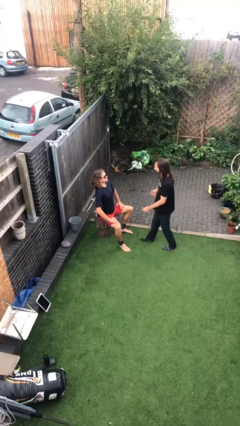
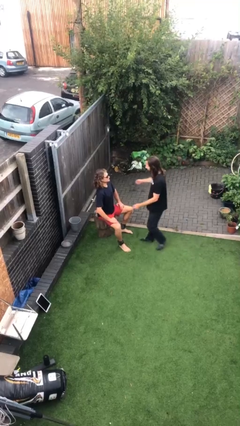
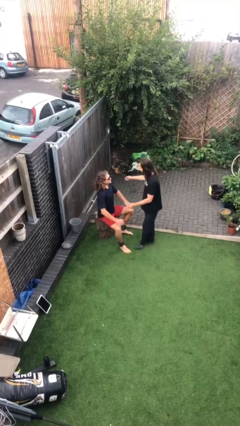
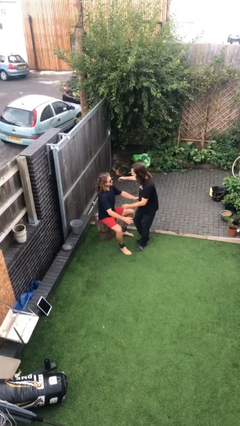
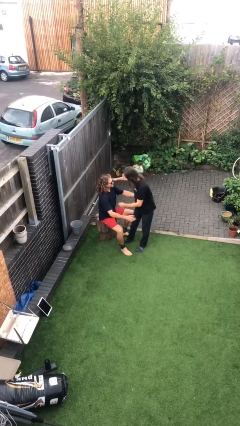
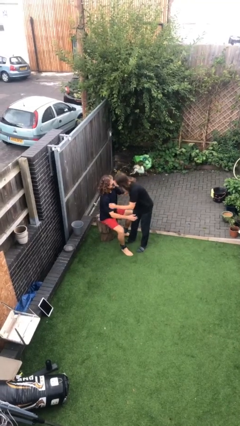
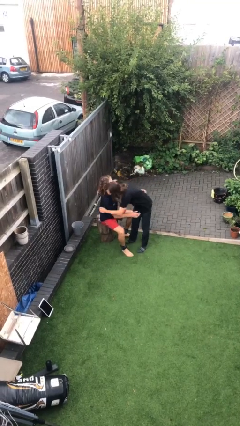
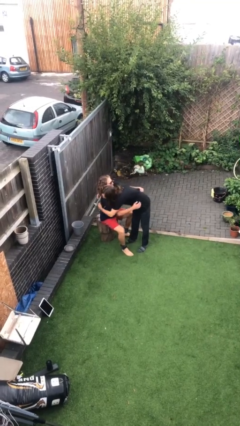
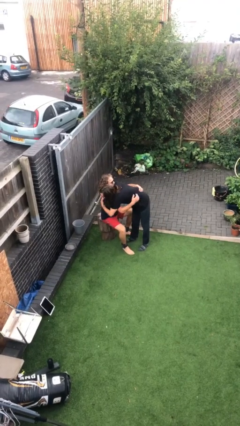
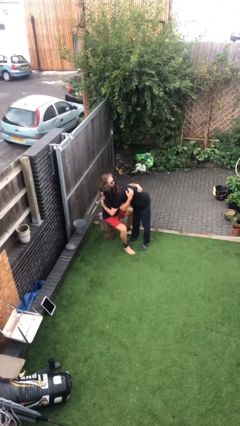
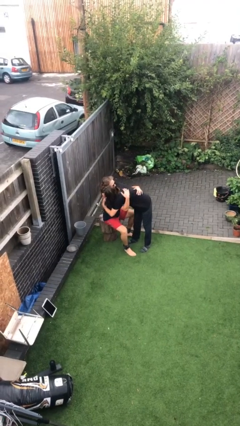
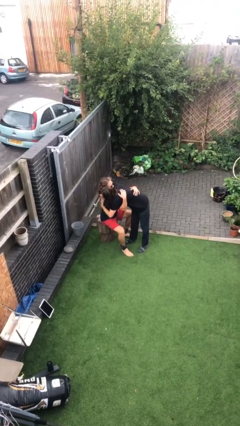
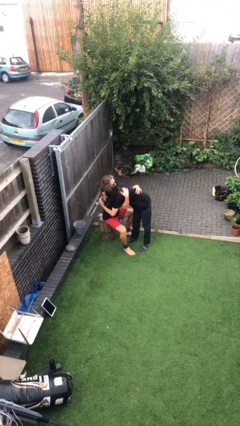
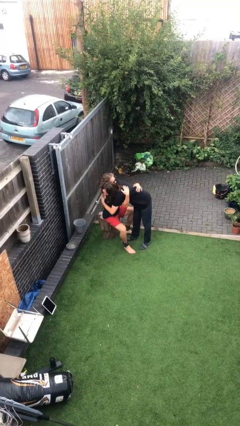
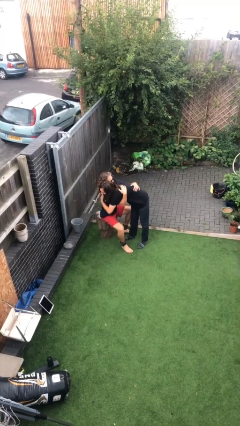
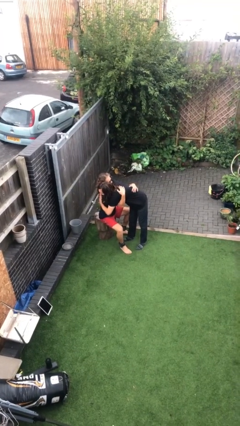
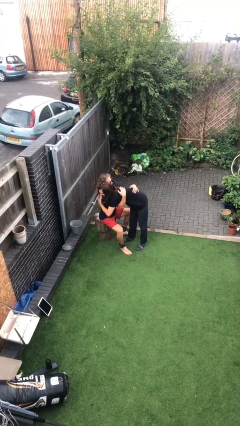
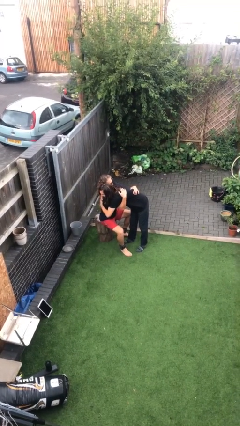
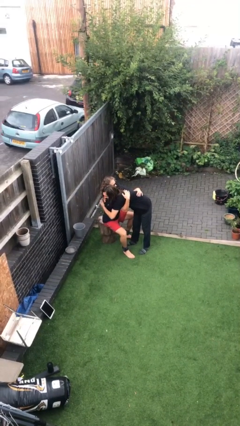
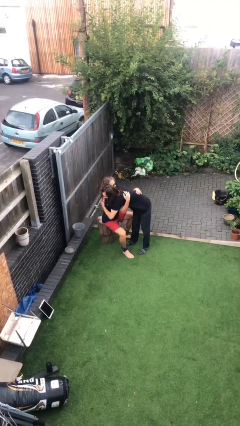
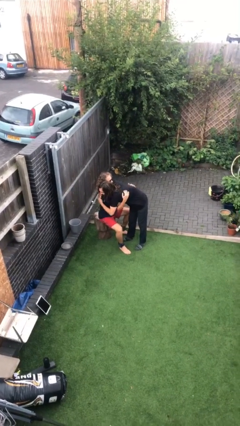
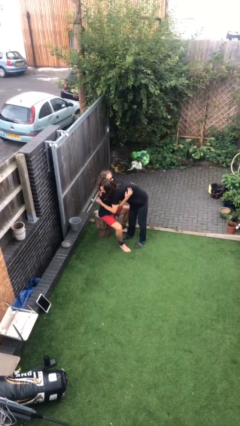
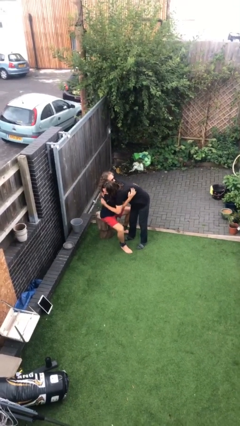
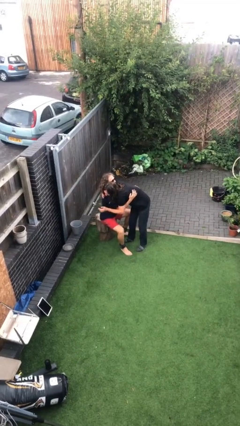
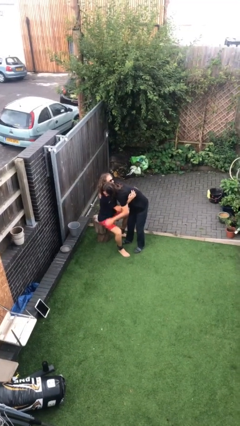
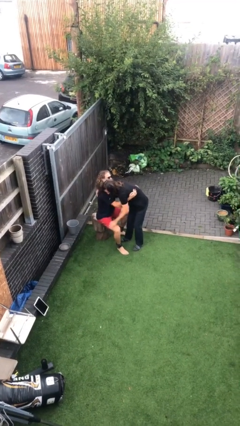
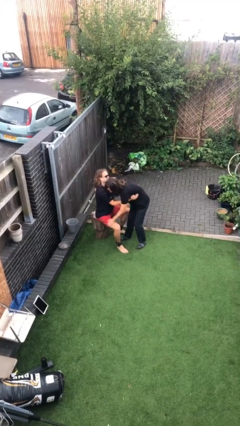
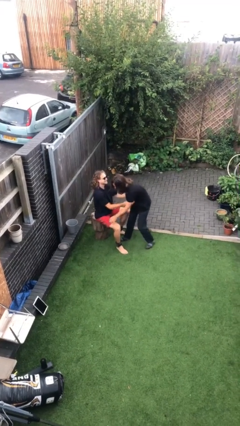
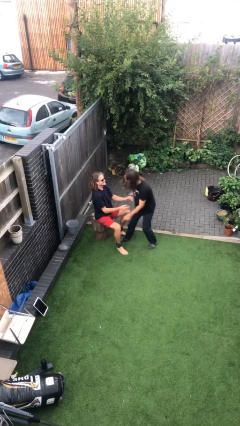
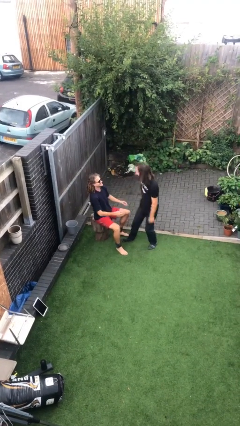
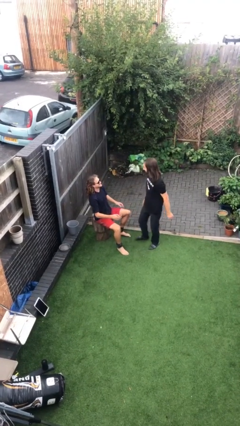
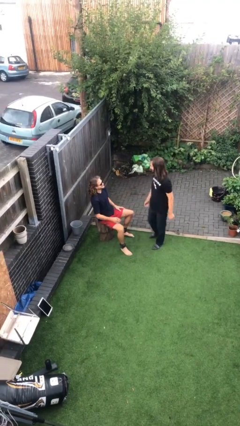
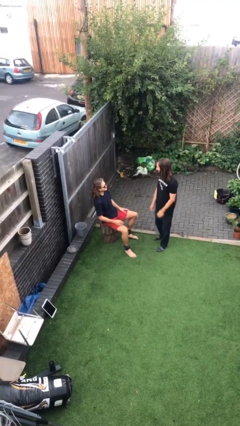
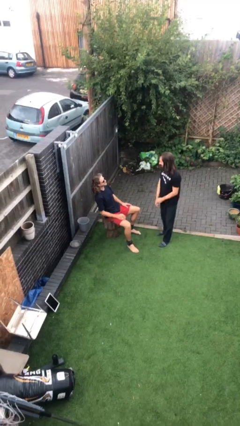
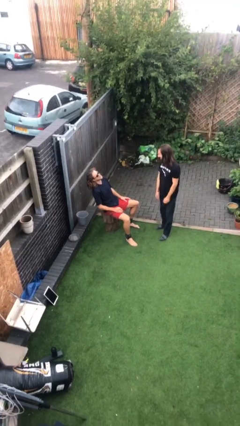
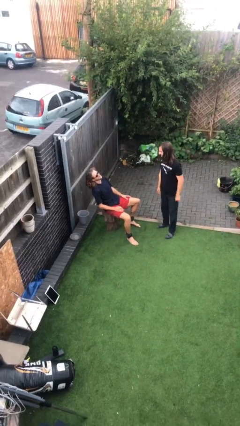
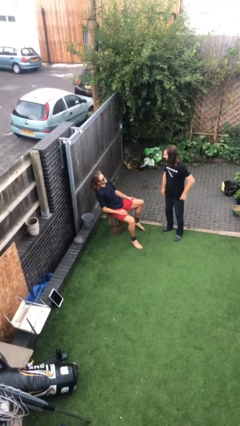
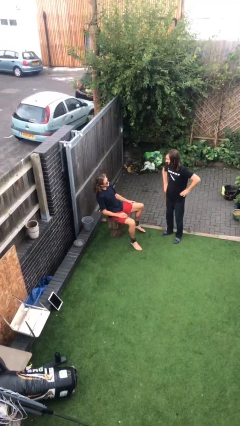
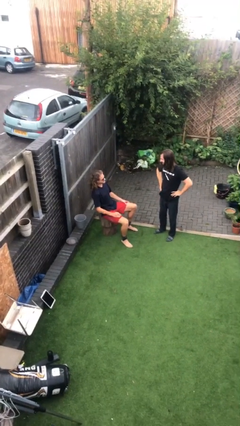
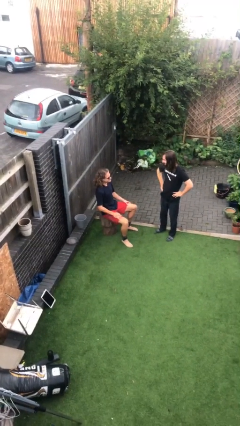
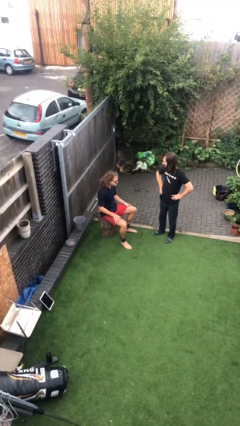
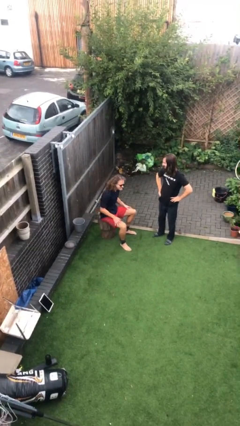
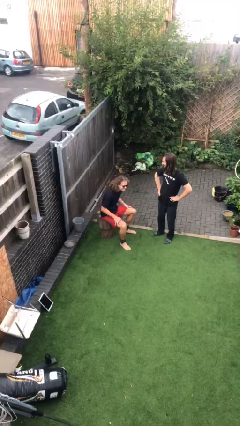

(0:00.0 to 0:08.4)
person embraces person

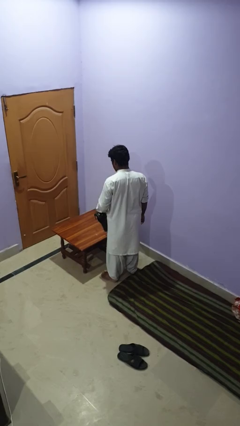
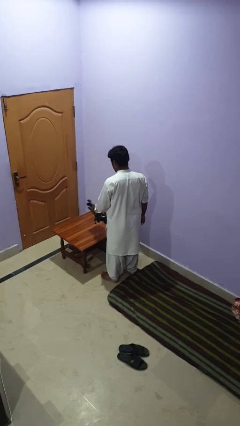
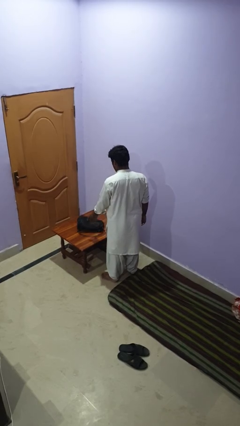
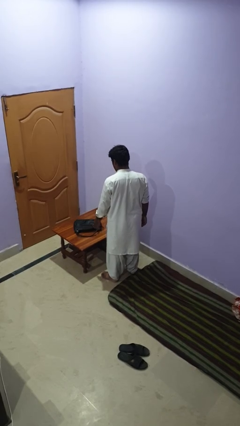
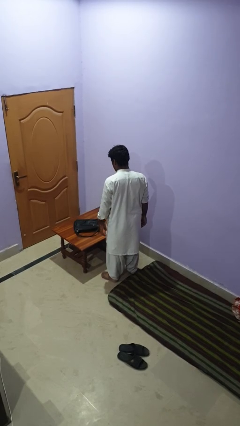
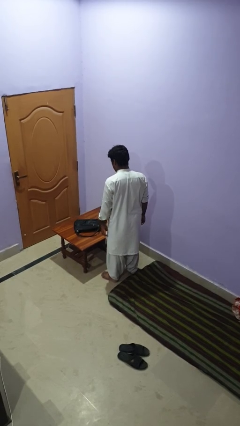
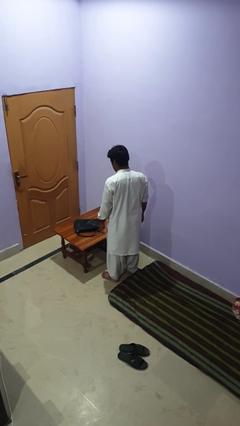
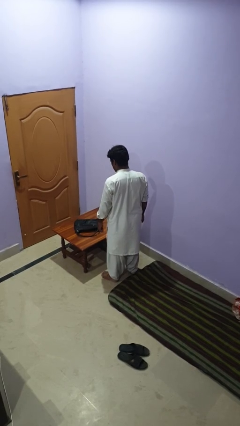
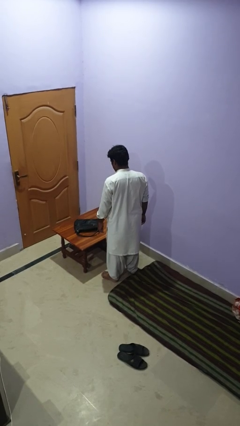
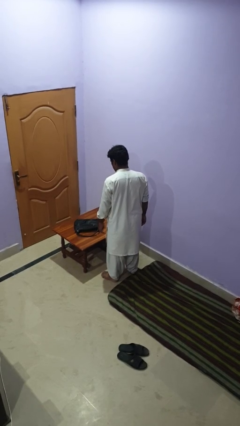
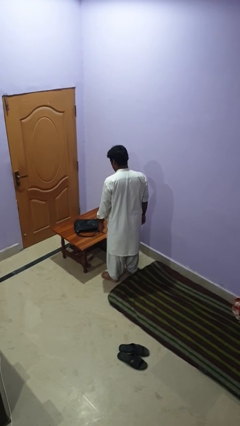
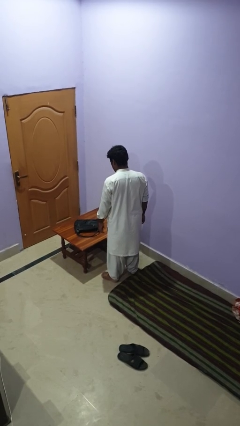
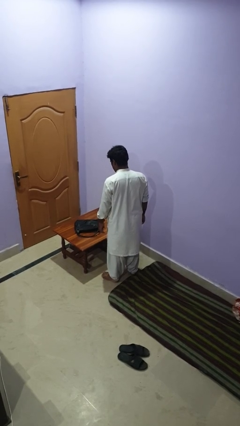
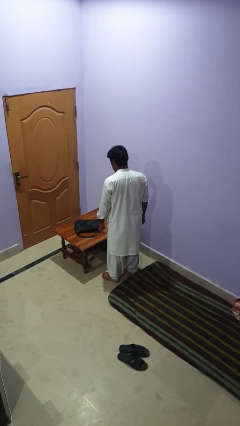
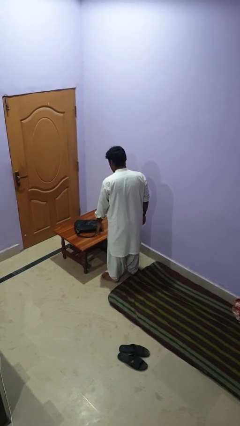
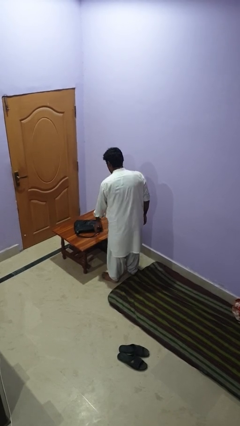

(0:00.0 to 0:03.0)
person throws object on table

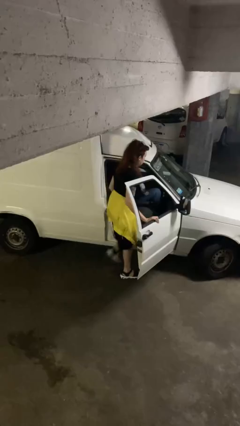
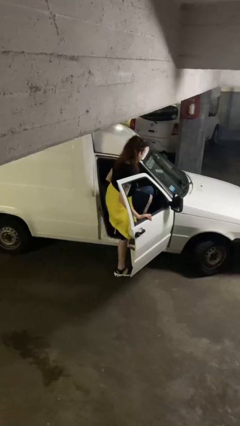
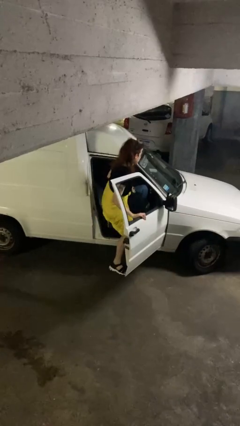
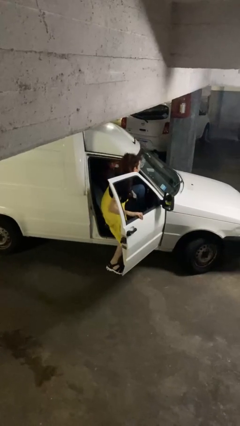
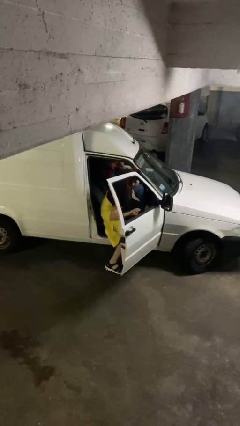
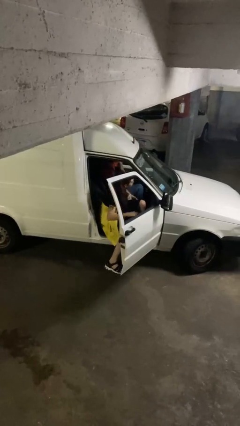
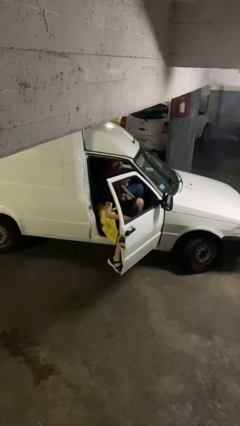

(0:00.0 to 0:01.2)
person enters car

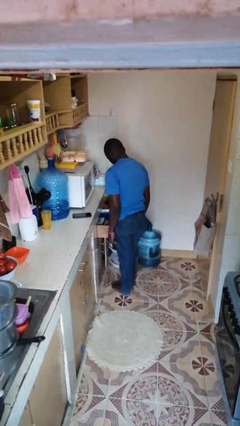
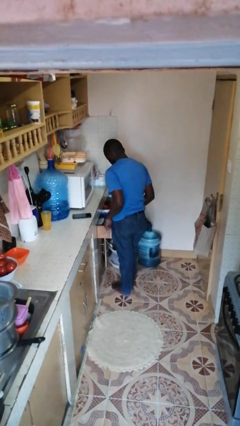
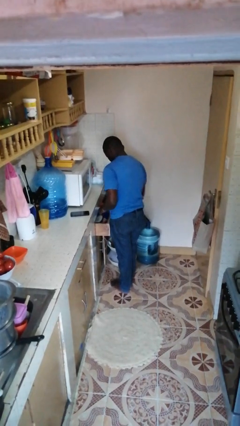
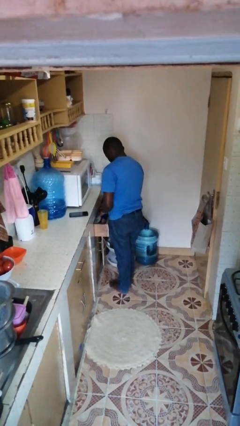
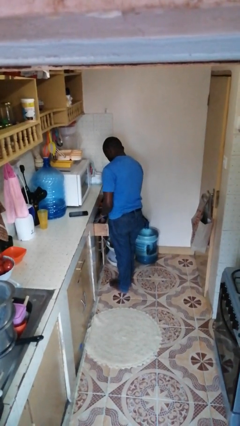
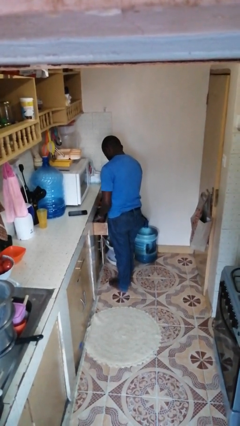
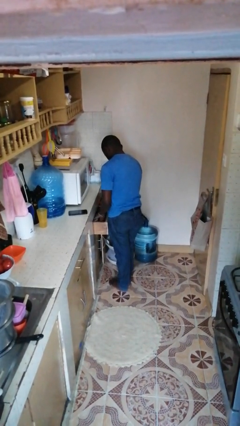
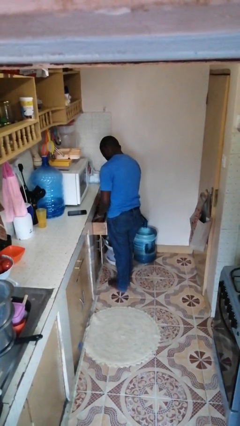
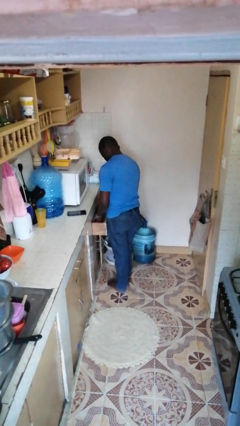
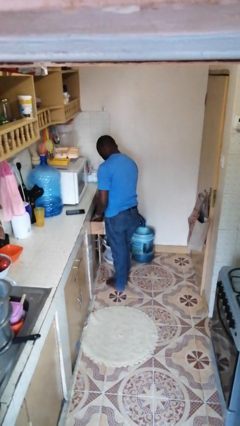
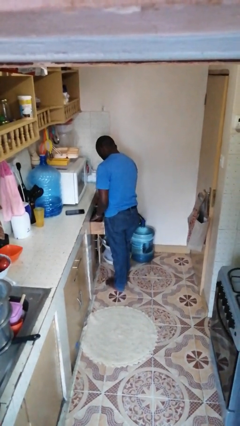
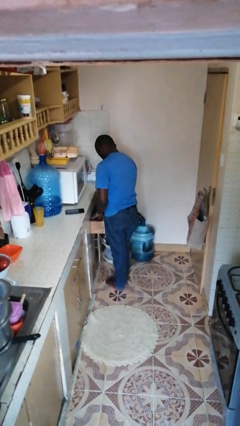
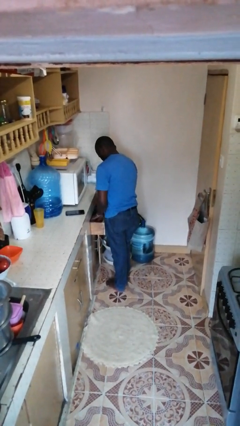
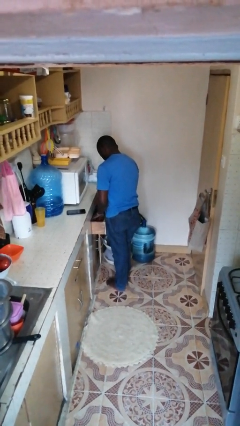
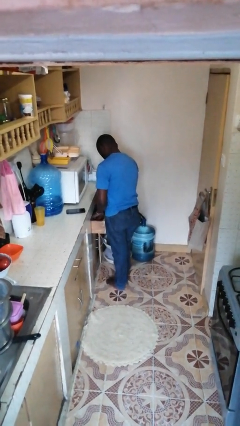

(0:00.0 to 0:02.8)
person searches in kitchen drawer

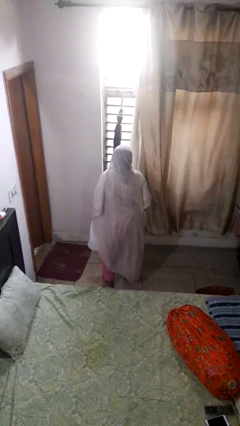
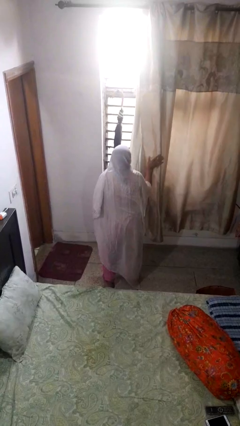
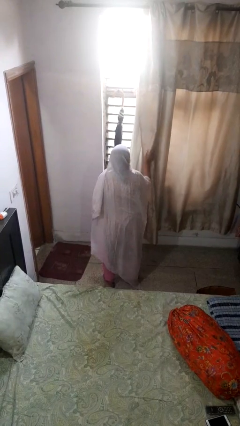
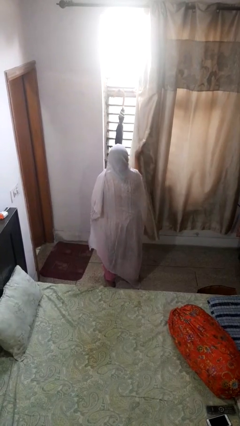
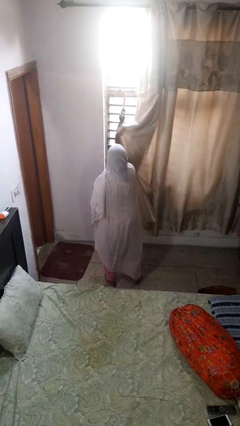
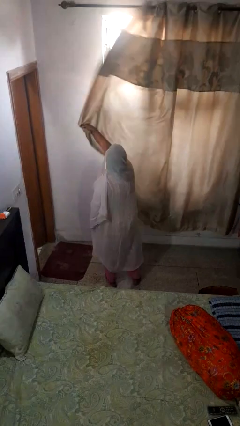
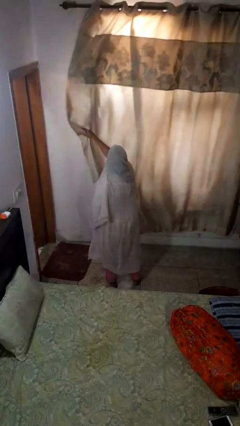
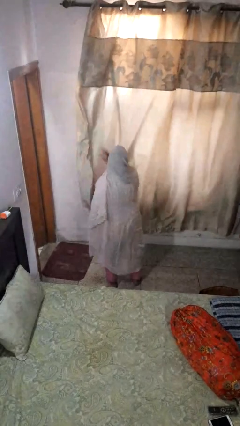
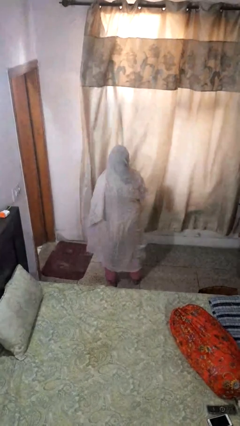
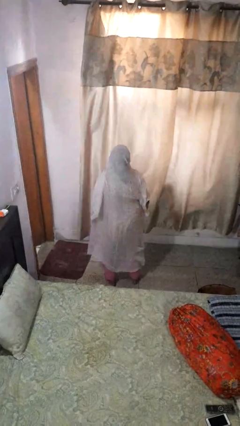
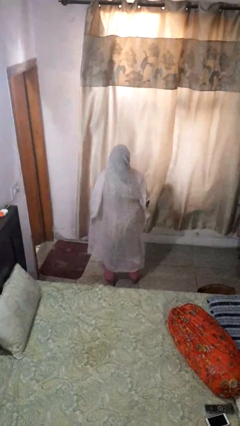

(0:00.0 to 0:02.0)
person closes curtains
